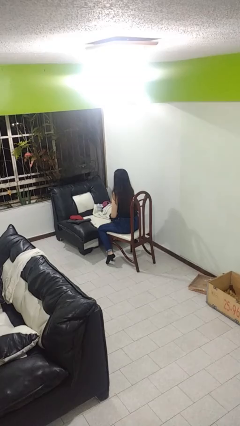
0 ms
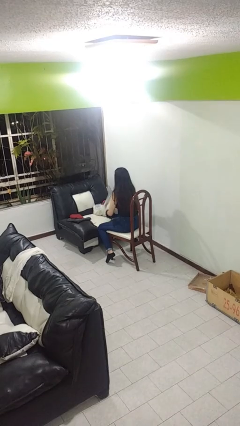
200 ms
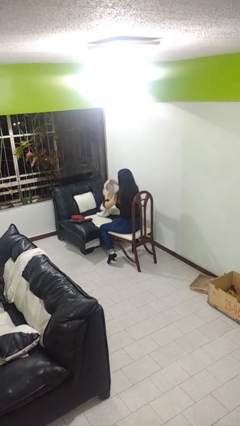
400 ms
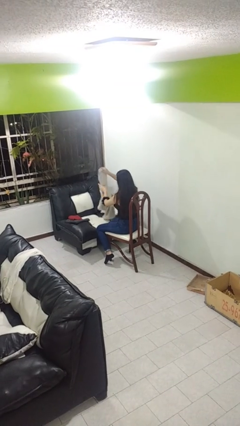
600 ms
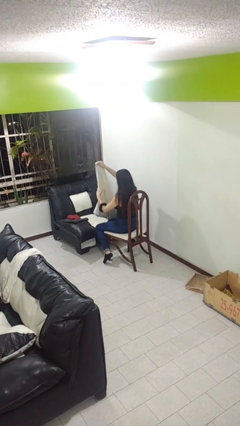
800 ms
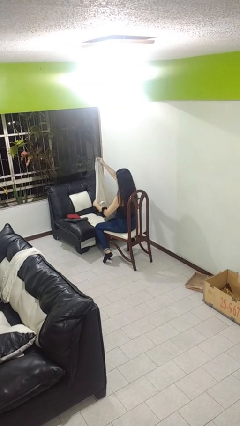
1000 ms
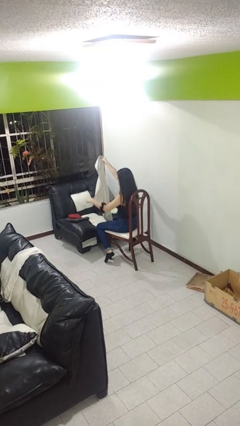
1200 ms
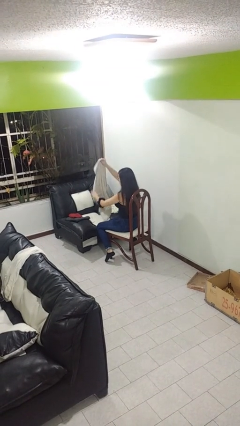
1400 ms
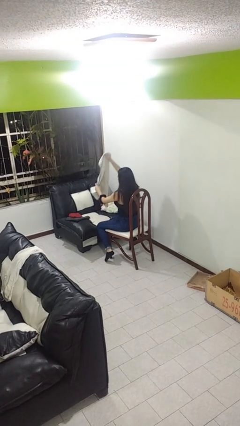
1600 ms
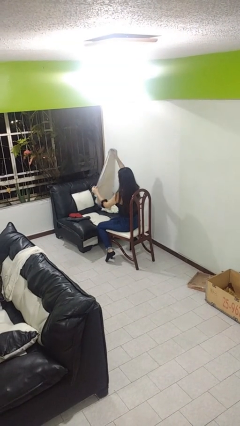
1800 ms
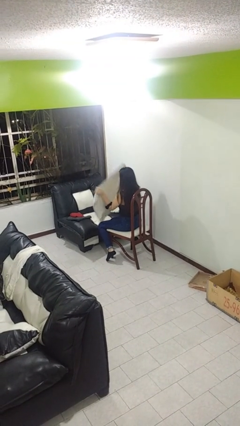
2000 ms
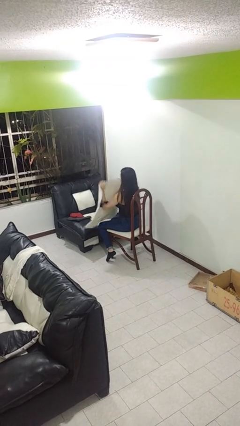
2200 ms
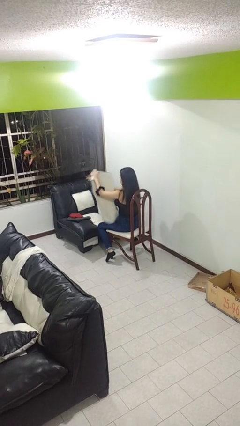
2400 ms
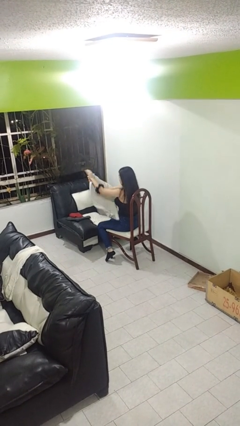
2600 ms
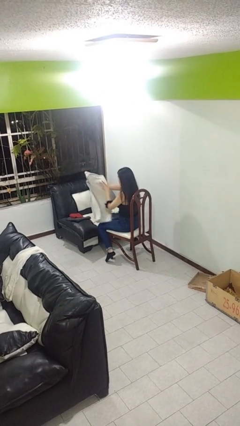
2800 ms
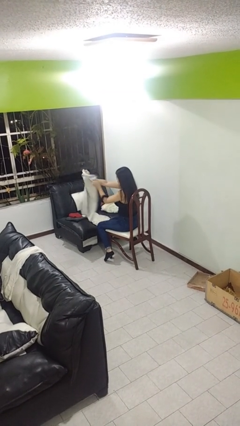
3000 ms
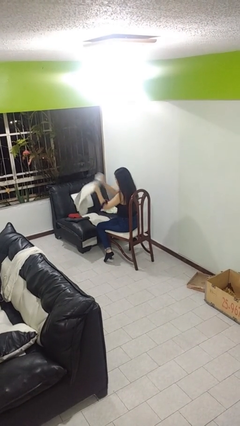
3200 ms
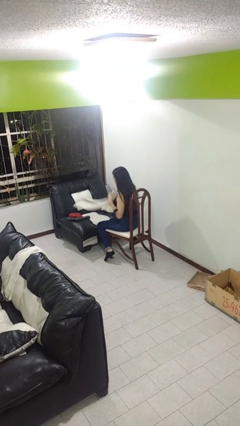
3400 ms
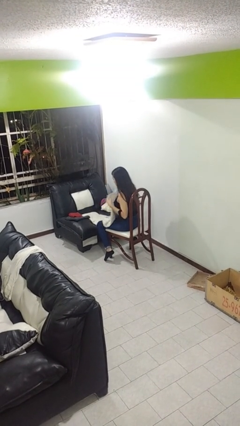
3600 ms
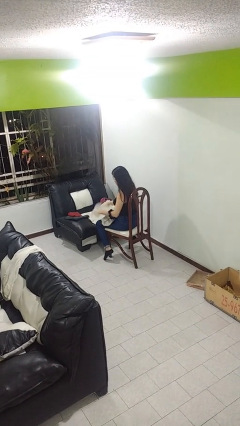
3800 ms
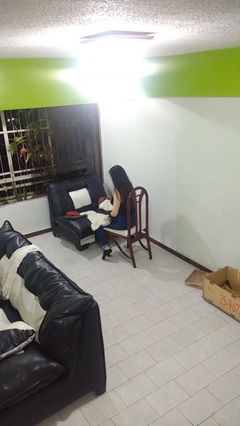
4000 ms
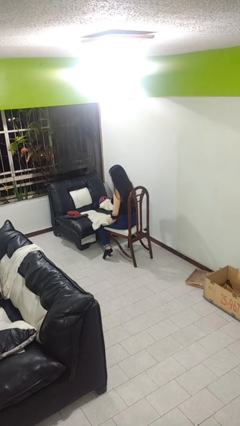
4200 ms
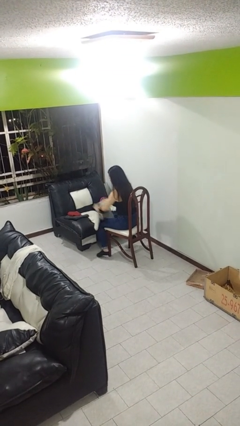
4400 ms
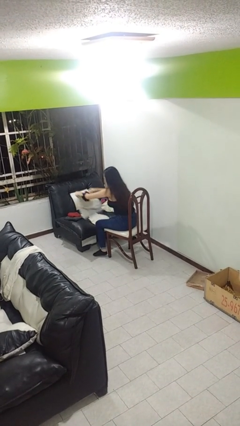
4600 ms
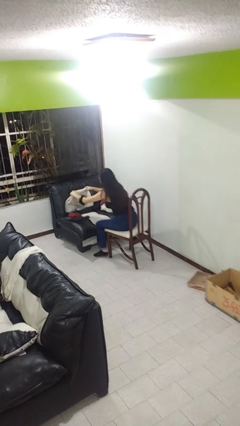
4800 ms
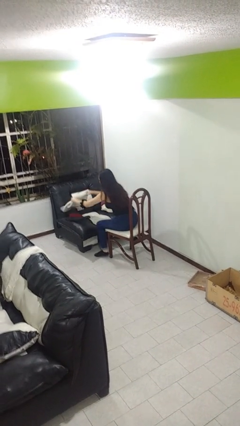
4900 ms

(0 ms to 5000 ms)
person folds towel

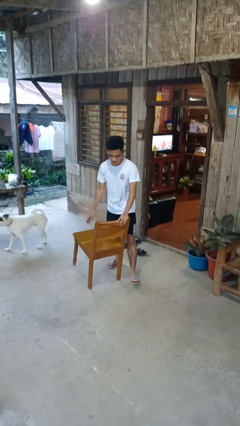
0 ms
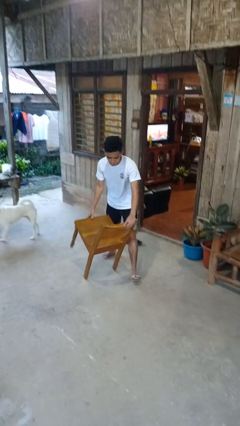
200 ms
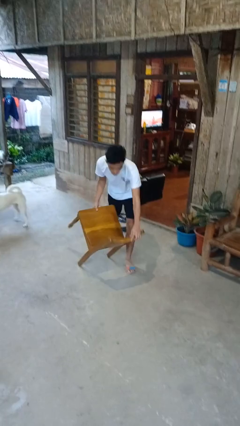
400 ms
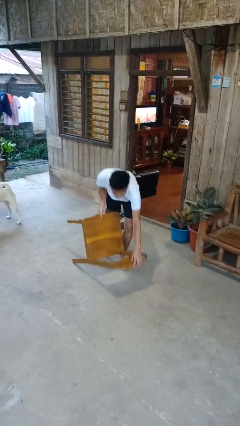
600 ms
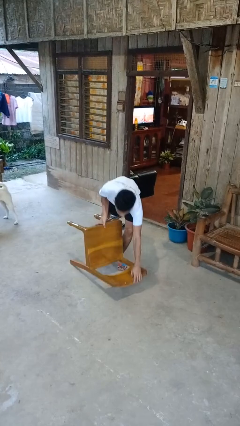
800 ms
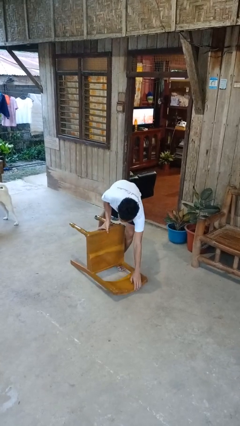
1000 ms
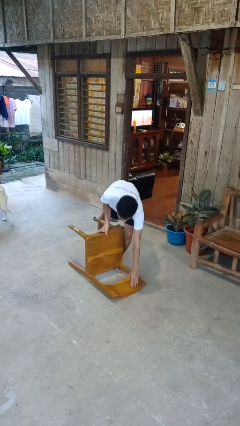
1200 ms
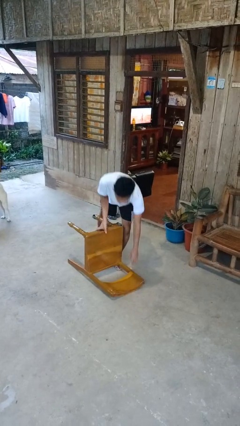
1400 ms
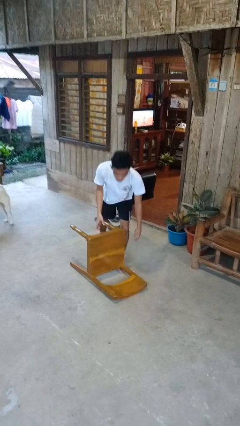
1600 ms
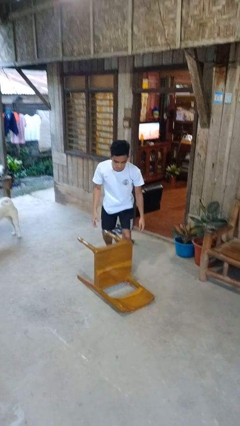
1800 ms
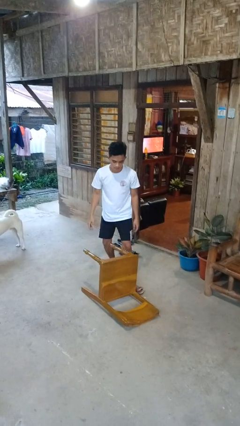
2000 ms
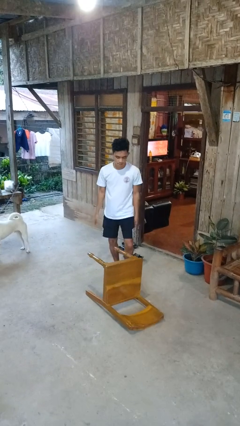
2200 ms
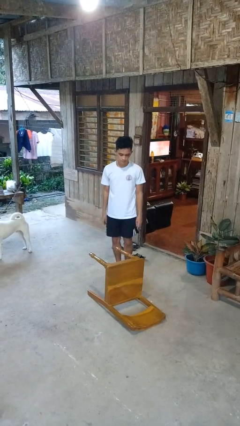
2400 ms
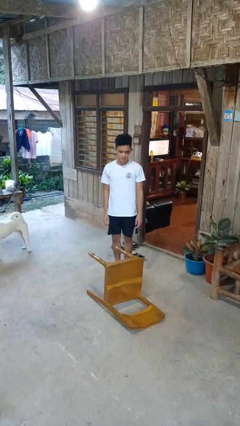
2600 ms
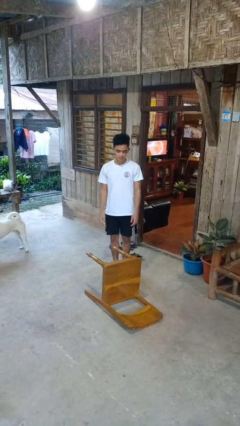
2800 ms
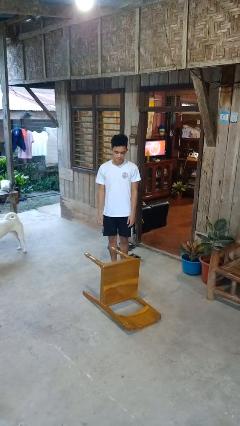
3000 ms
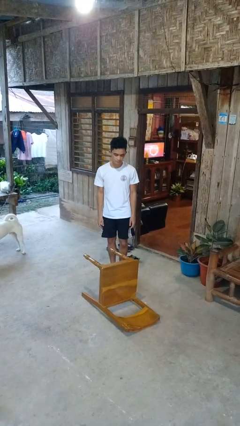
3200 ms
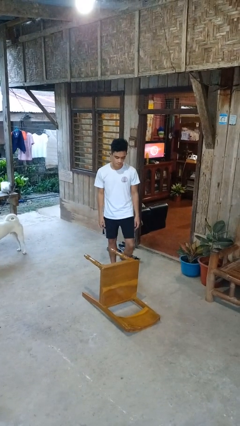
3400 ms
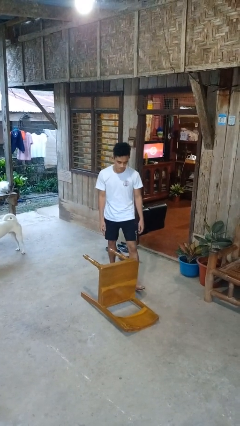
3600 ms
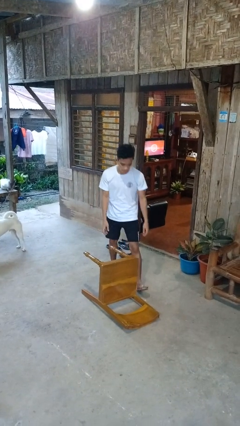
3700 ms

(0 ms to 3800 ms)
person knocks over glass

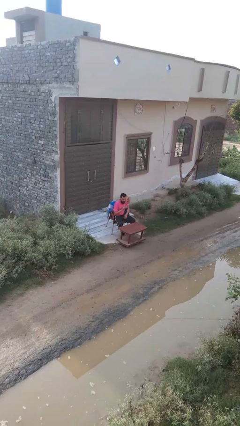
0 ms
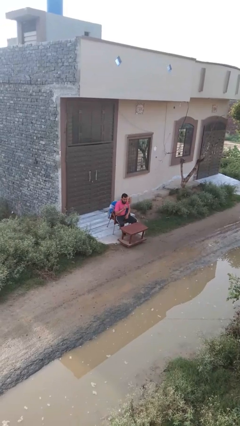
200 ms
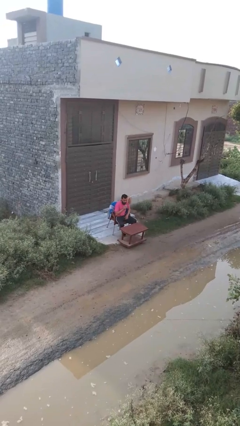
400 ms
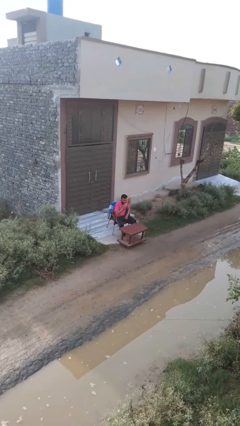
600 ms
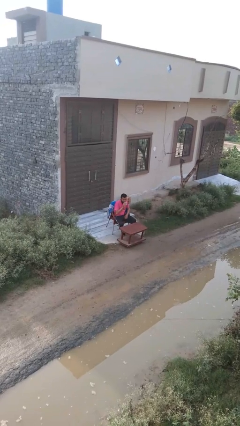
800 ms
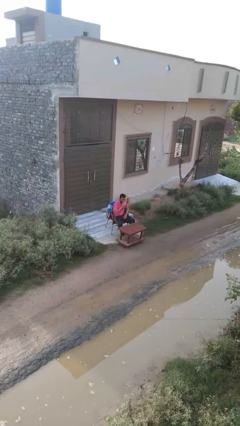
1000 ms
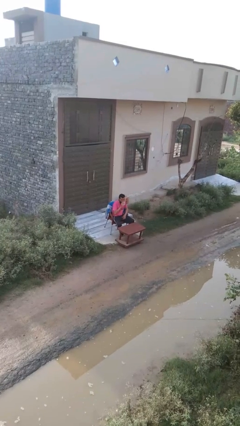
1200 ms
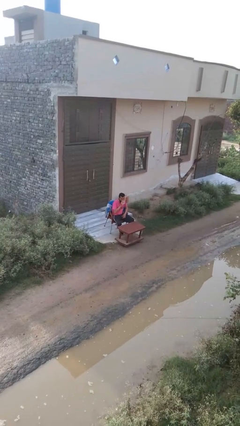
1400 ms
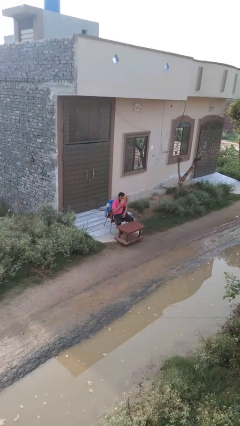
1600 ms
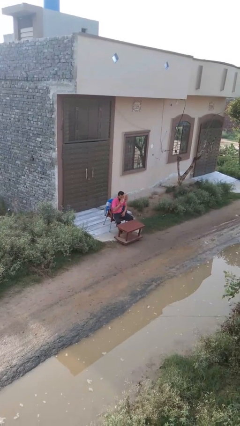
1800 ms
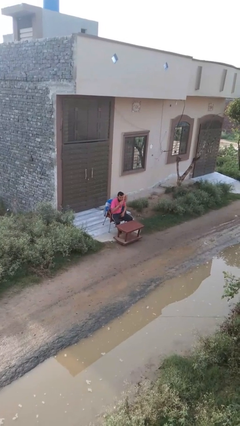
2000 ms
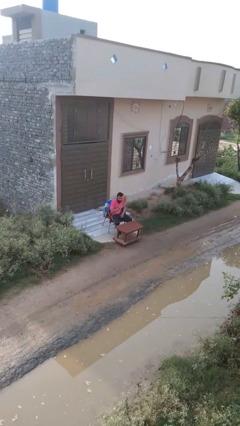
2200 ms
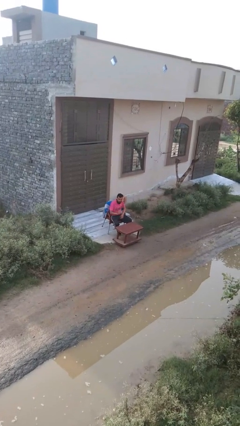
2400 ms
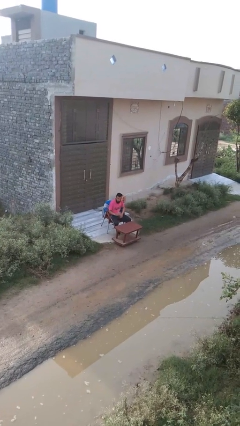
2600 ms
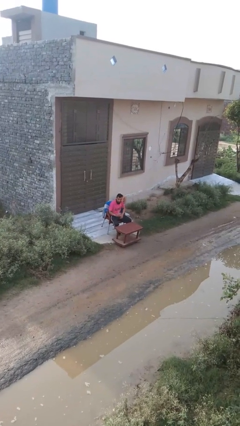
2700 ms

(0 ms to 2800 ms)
person drinks from mug

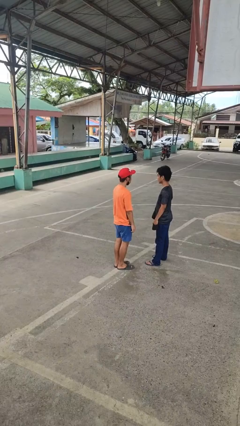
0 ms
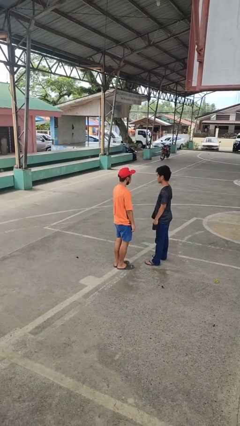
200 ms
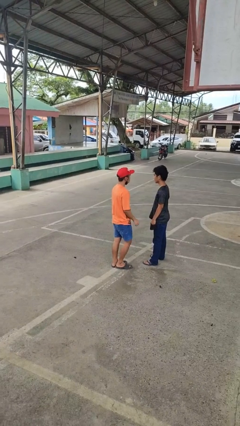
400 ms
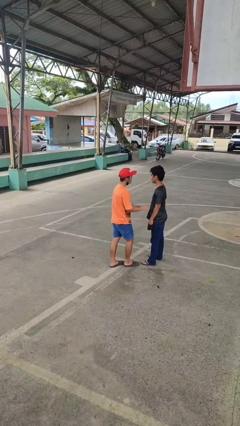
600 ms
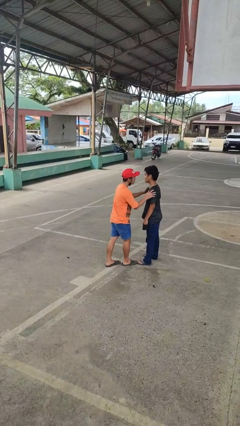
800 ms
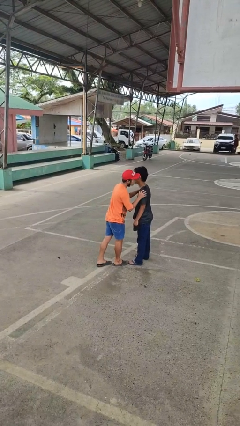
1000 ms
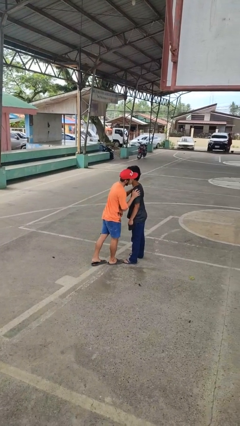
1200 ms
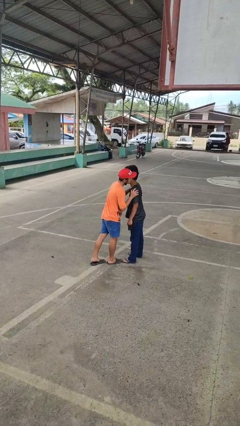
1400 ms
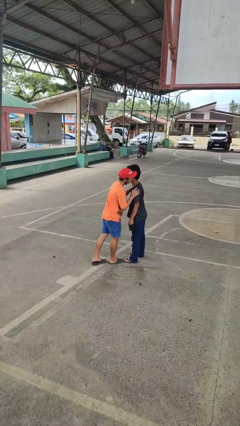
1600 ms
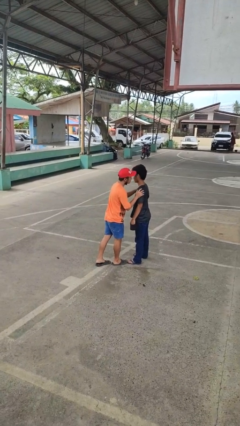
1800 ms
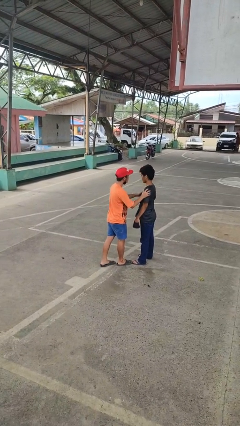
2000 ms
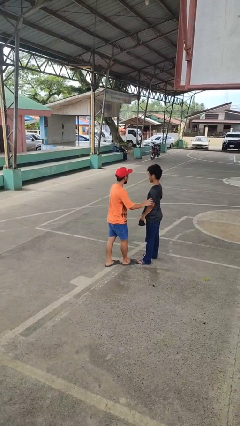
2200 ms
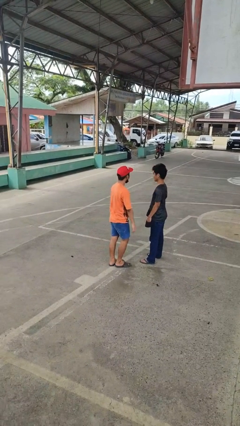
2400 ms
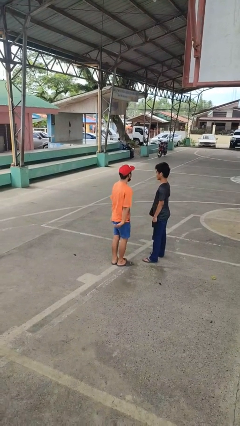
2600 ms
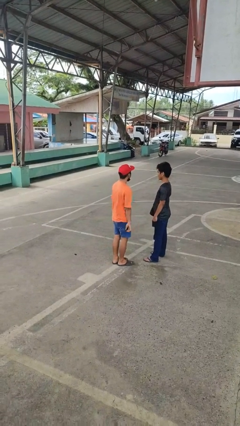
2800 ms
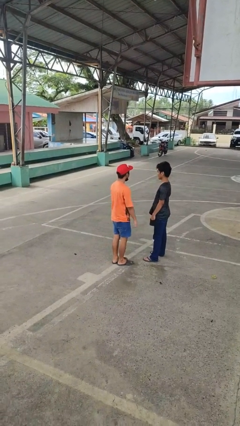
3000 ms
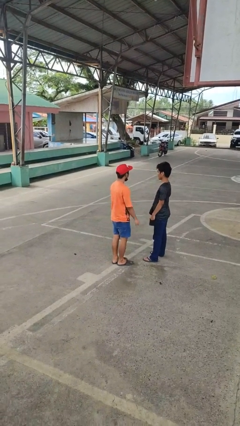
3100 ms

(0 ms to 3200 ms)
person kisses cheek of person

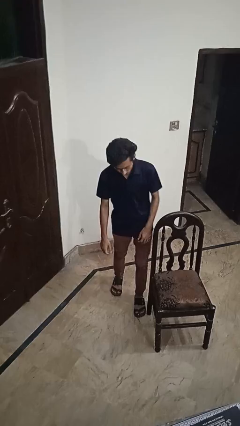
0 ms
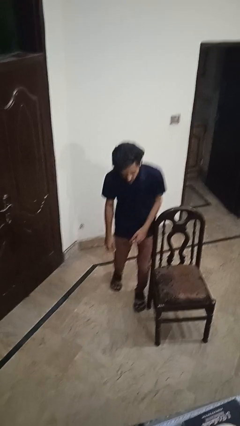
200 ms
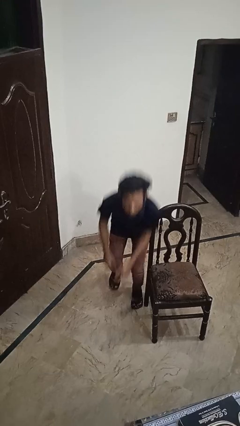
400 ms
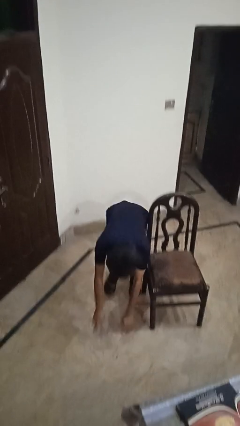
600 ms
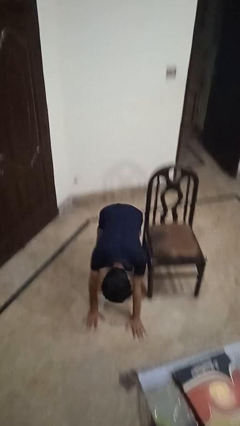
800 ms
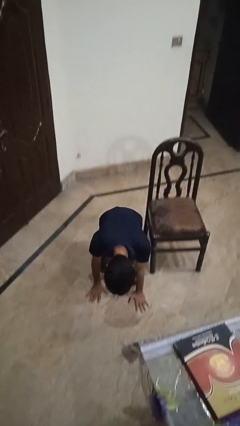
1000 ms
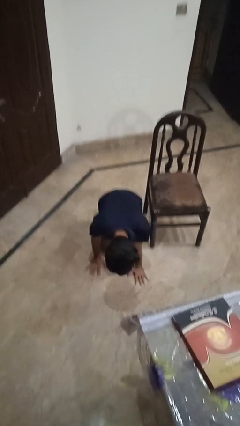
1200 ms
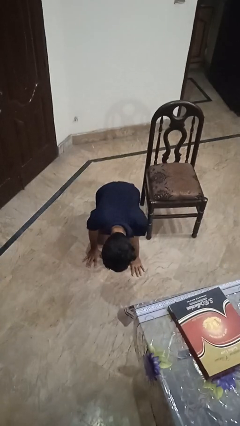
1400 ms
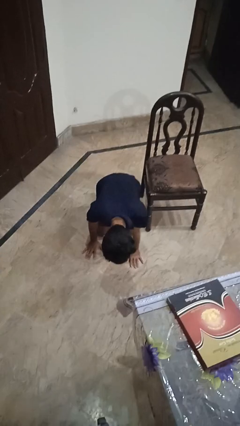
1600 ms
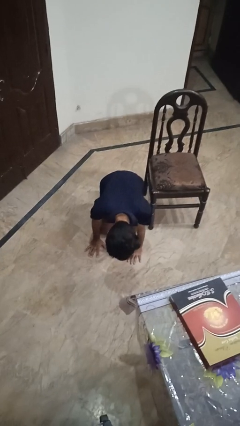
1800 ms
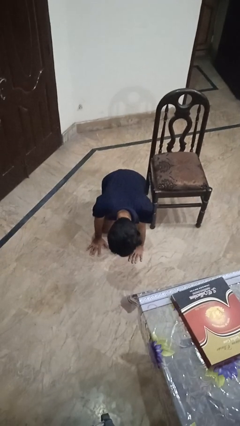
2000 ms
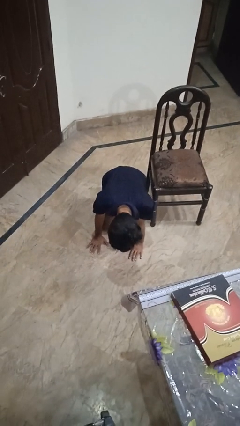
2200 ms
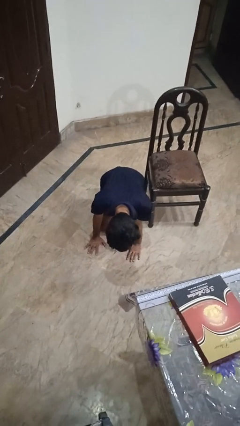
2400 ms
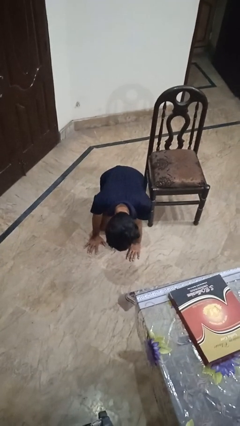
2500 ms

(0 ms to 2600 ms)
person trips on object on floor
